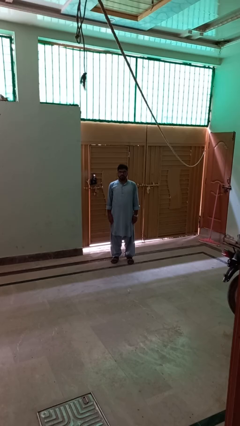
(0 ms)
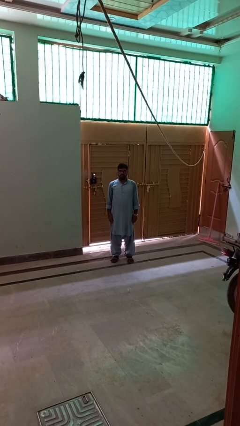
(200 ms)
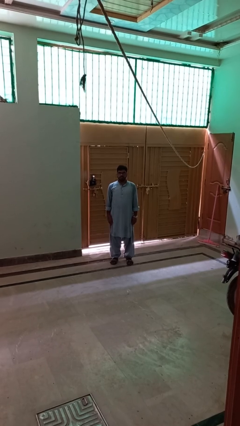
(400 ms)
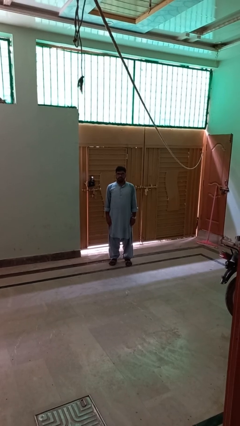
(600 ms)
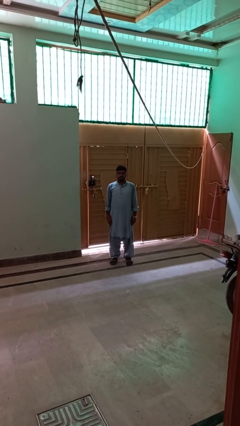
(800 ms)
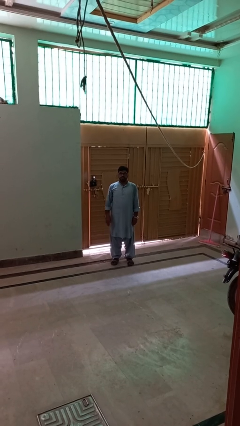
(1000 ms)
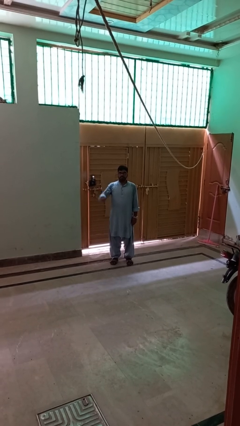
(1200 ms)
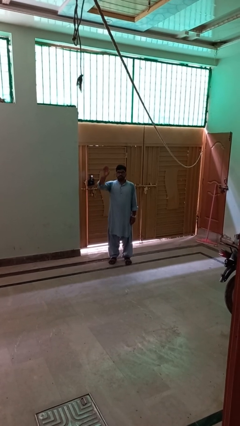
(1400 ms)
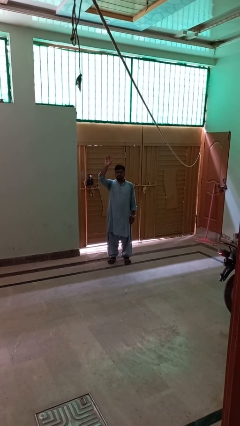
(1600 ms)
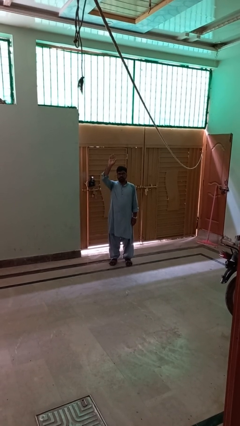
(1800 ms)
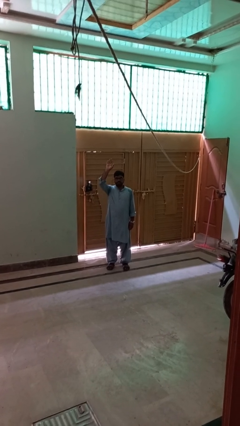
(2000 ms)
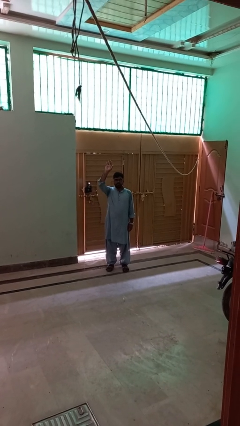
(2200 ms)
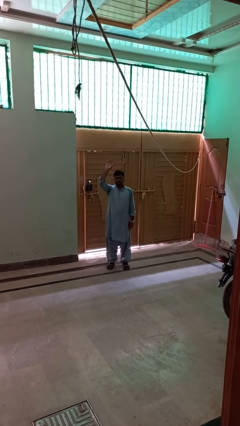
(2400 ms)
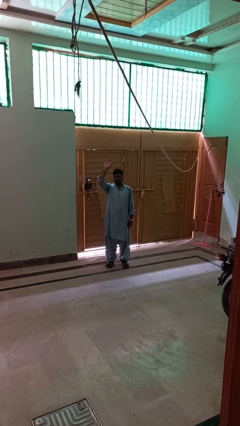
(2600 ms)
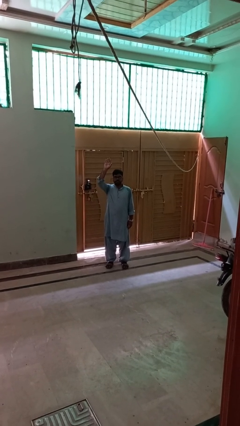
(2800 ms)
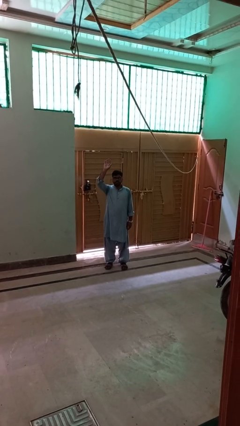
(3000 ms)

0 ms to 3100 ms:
person gestures raise hand

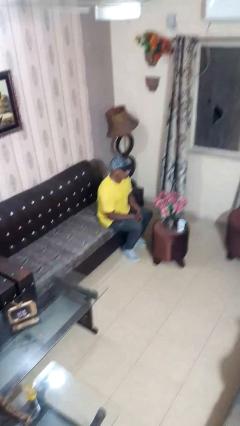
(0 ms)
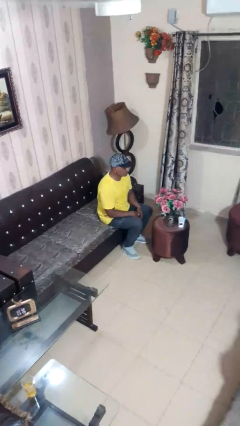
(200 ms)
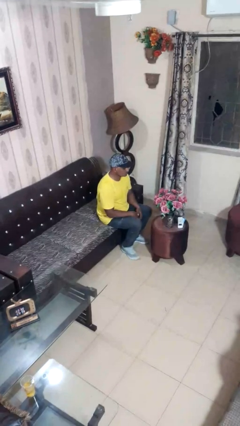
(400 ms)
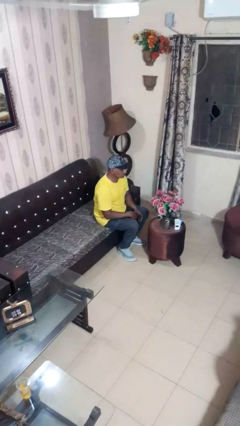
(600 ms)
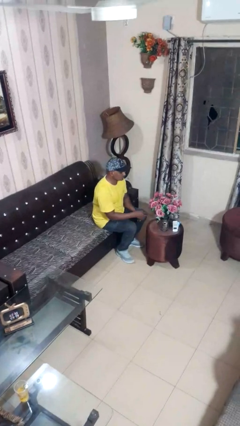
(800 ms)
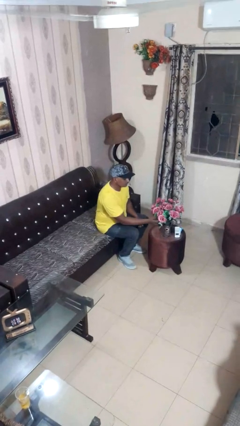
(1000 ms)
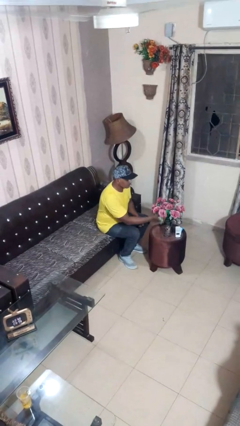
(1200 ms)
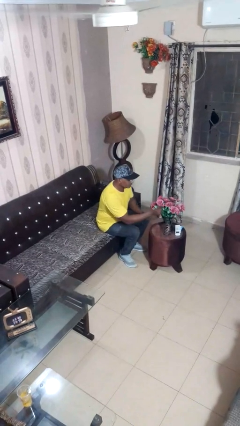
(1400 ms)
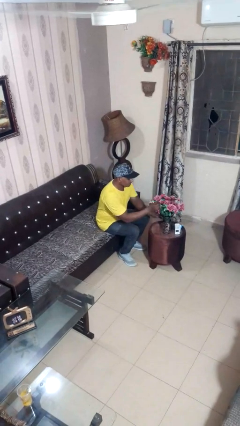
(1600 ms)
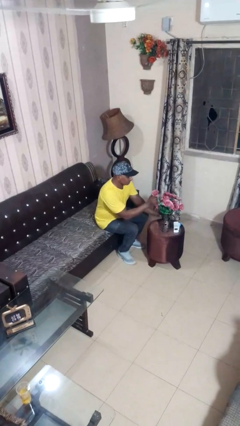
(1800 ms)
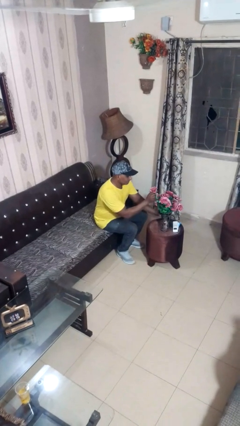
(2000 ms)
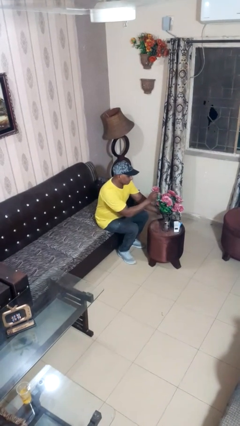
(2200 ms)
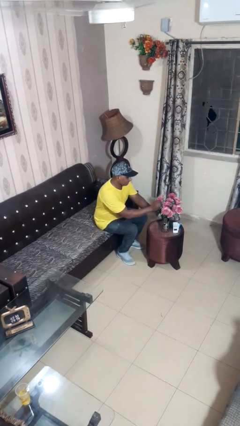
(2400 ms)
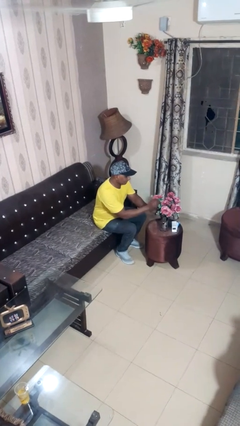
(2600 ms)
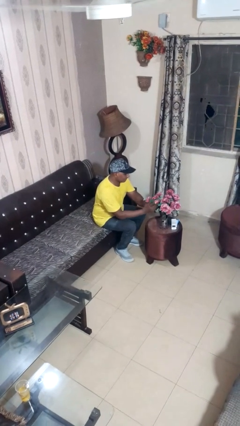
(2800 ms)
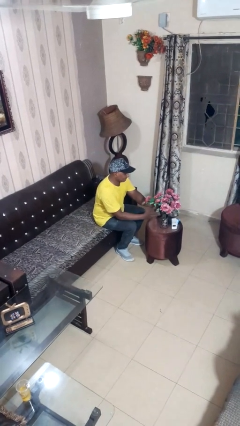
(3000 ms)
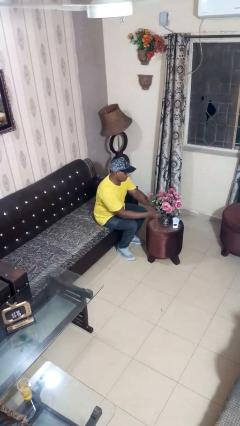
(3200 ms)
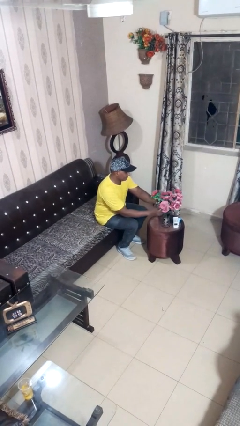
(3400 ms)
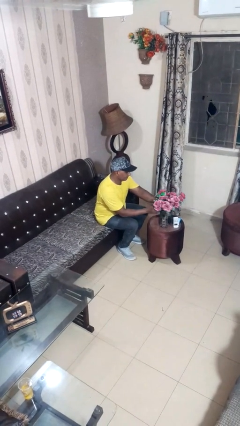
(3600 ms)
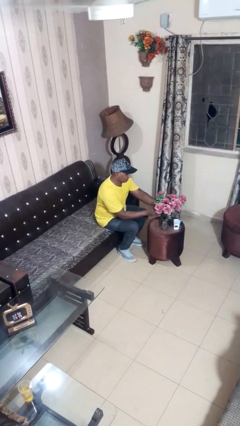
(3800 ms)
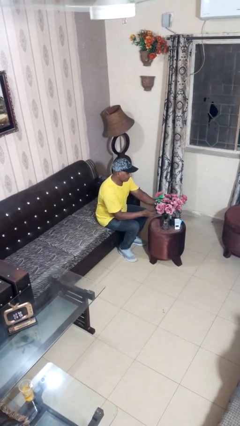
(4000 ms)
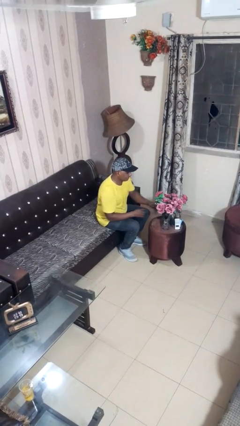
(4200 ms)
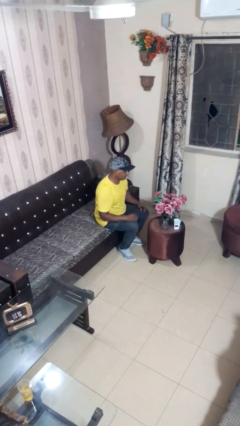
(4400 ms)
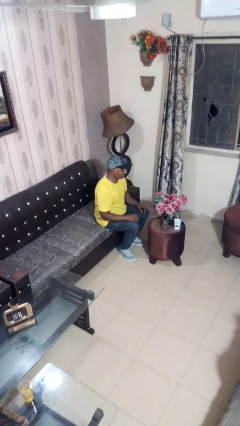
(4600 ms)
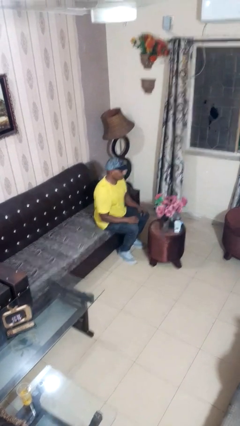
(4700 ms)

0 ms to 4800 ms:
person arranges flowers in vase

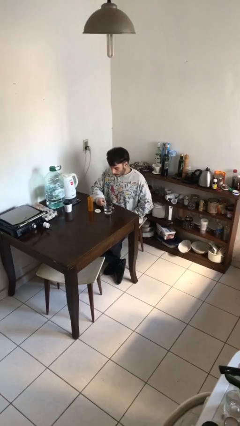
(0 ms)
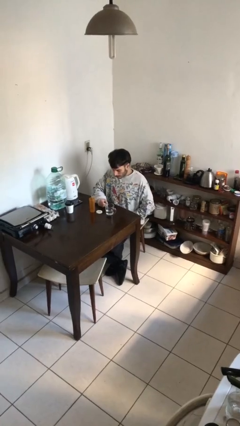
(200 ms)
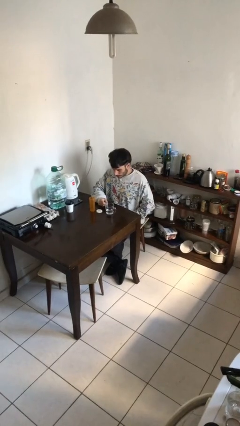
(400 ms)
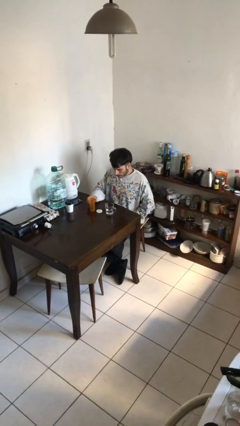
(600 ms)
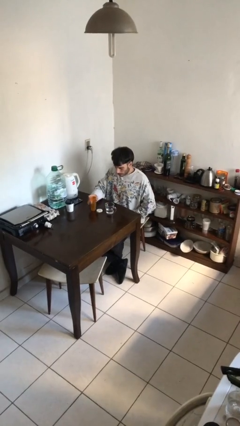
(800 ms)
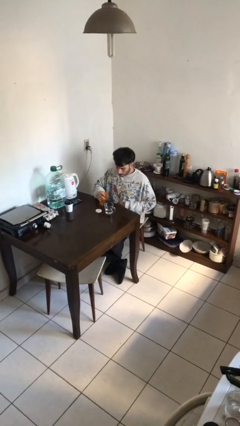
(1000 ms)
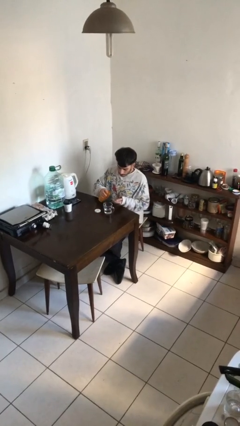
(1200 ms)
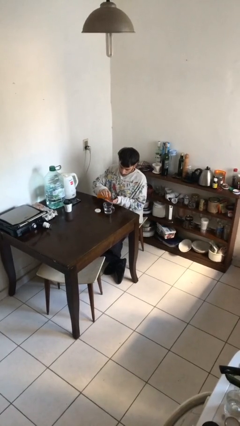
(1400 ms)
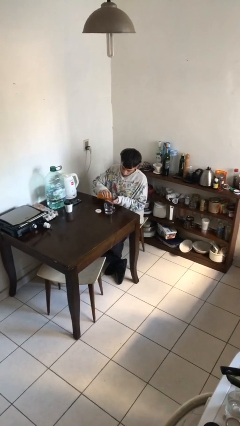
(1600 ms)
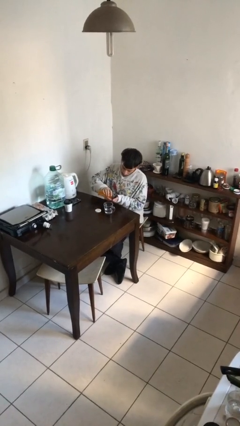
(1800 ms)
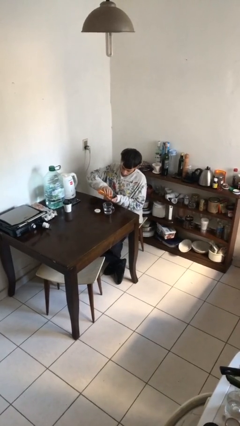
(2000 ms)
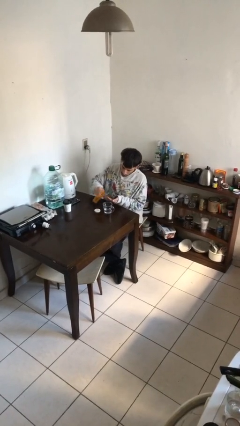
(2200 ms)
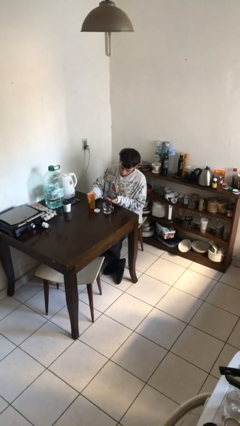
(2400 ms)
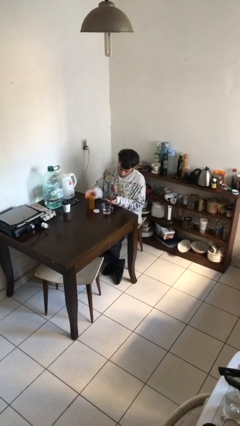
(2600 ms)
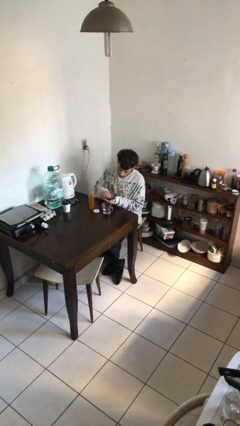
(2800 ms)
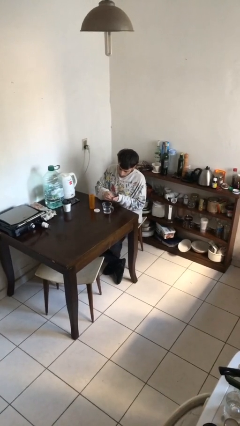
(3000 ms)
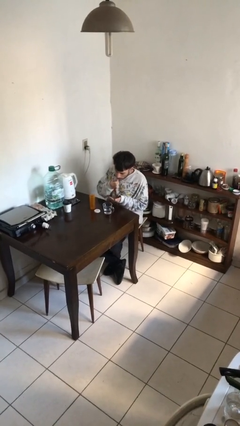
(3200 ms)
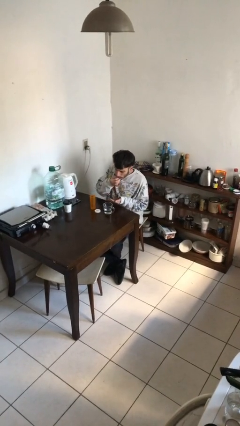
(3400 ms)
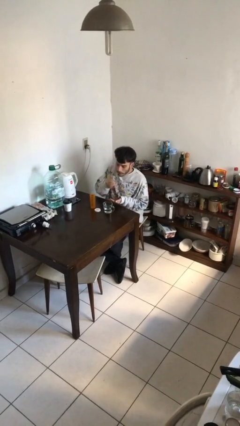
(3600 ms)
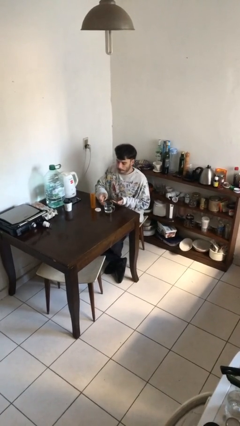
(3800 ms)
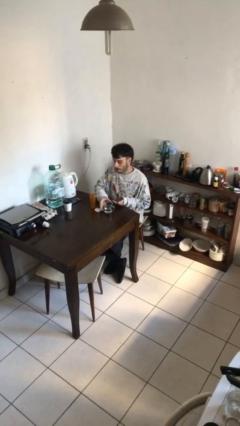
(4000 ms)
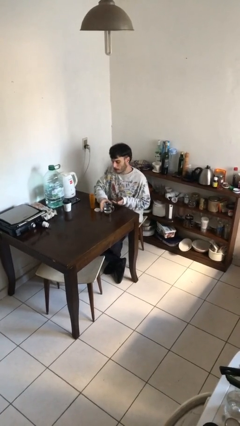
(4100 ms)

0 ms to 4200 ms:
person takes medicine pills

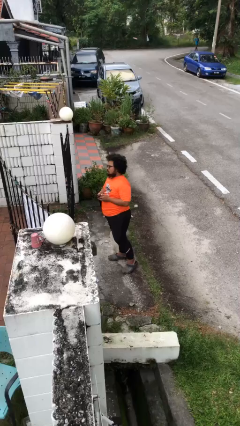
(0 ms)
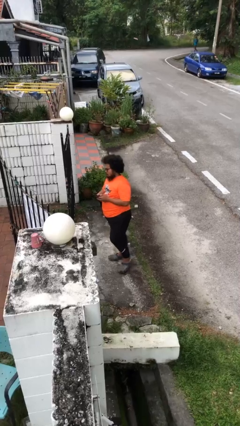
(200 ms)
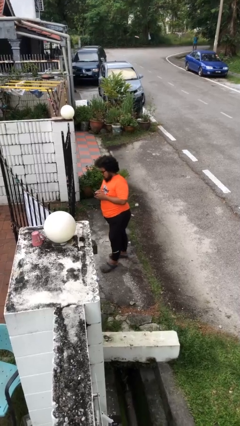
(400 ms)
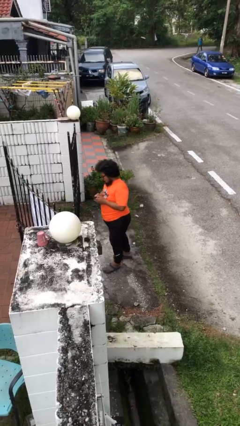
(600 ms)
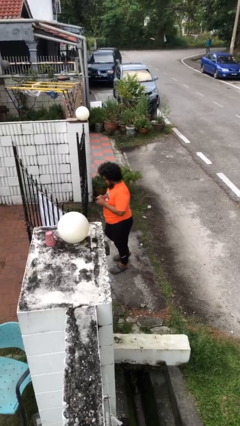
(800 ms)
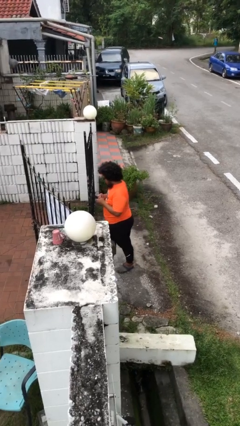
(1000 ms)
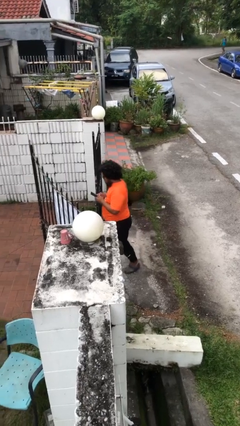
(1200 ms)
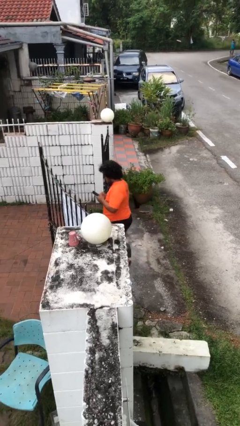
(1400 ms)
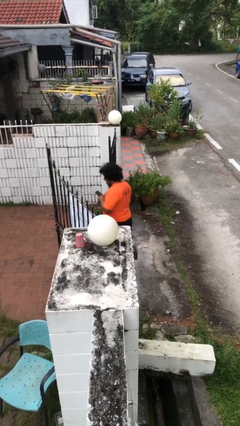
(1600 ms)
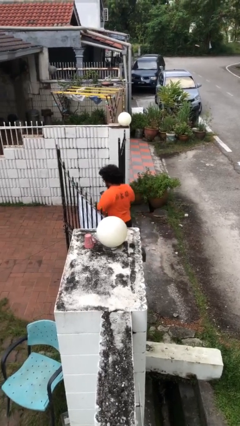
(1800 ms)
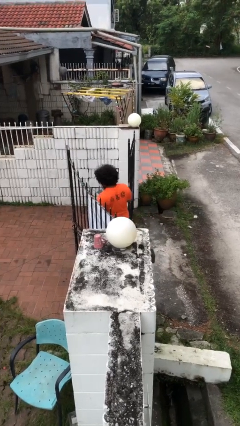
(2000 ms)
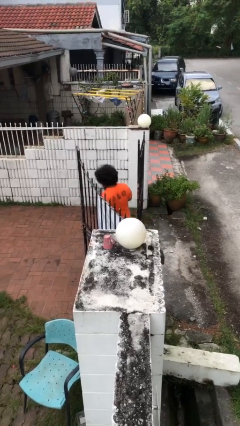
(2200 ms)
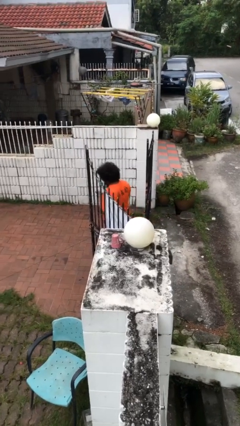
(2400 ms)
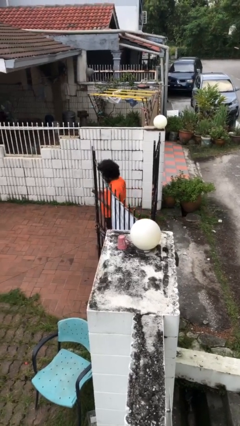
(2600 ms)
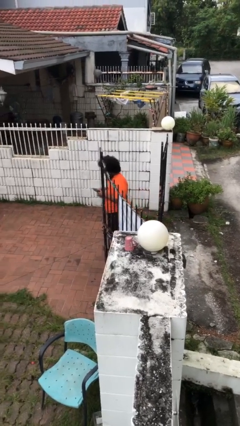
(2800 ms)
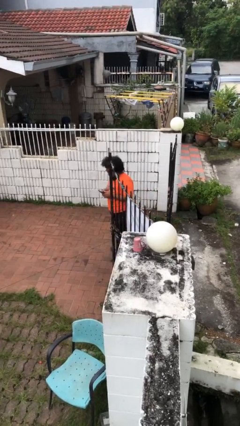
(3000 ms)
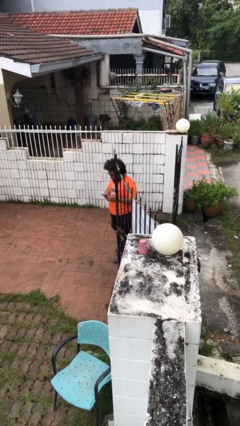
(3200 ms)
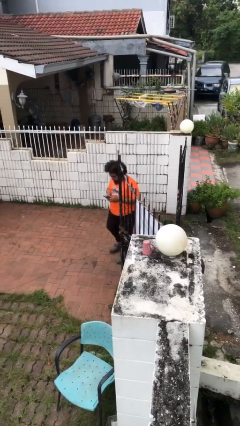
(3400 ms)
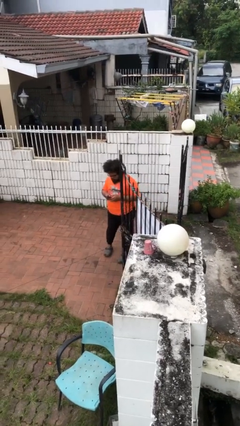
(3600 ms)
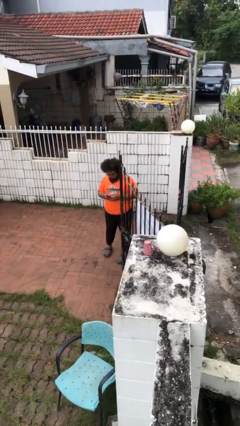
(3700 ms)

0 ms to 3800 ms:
person enters scene through structure

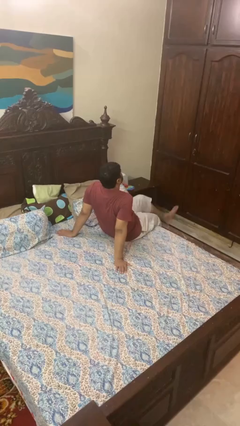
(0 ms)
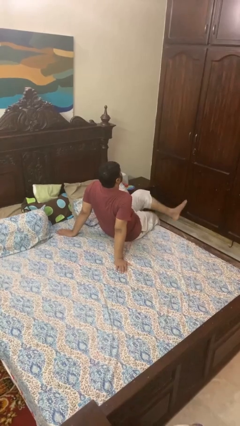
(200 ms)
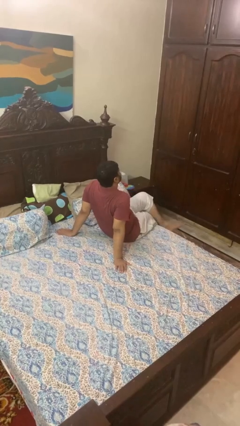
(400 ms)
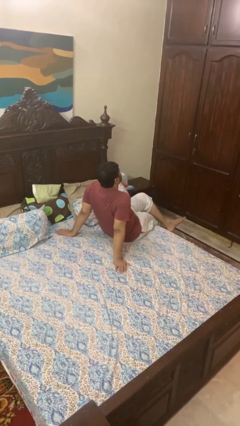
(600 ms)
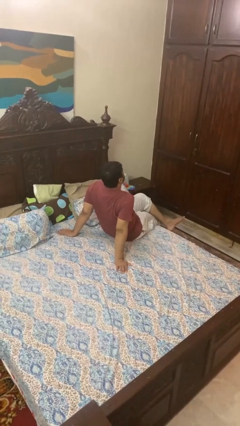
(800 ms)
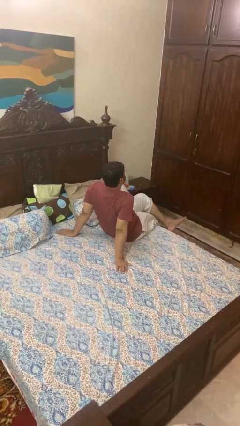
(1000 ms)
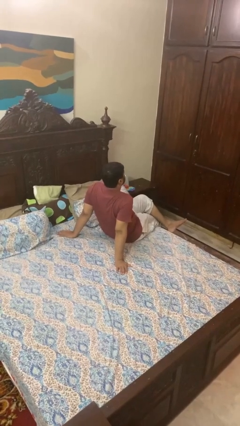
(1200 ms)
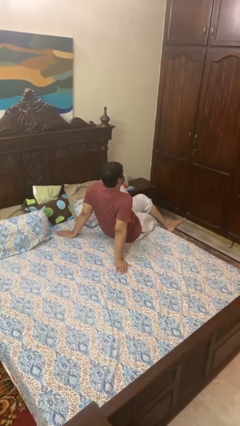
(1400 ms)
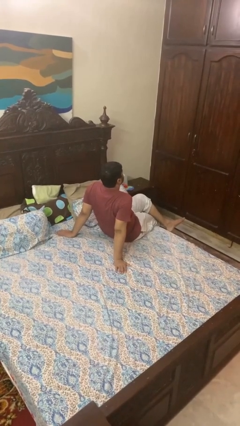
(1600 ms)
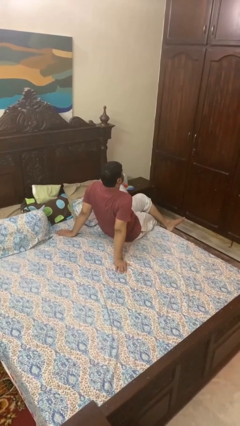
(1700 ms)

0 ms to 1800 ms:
person crosses legs

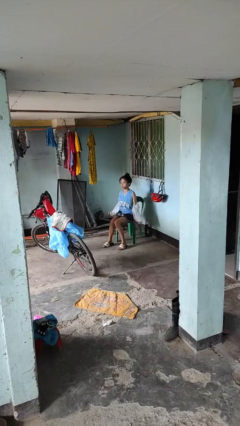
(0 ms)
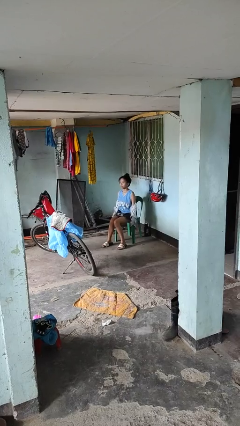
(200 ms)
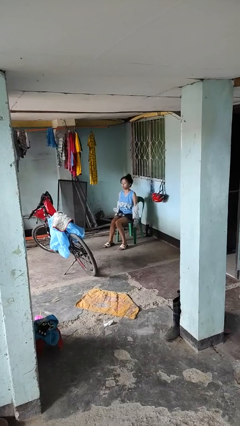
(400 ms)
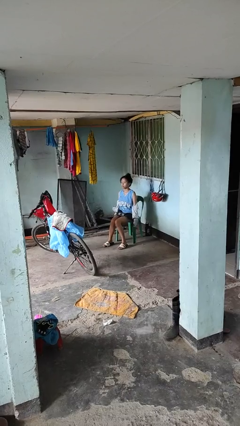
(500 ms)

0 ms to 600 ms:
person takes off jacket
